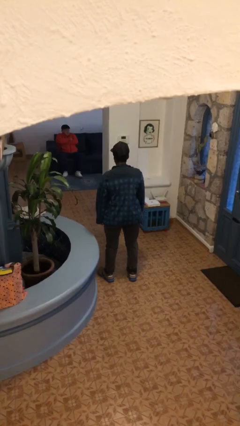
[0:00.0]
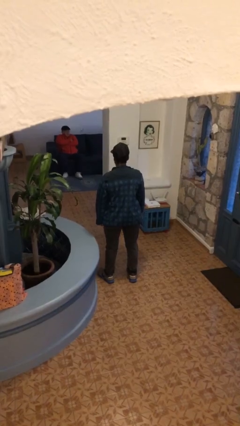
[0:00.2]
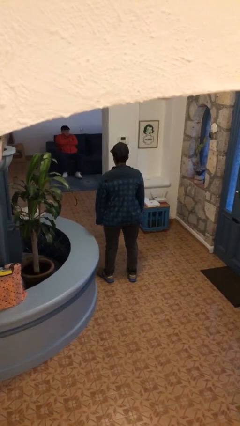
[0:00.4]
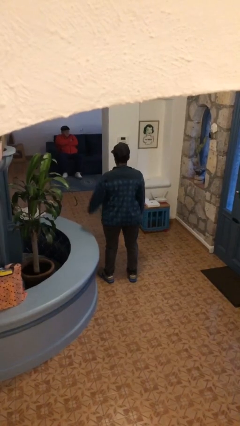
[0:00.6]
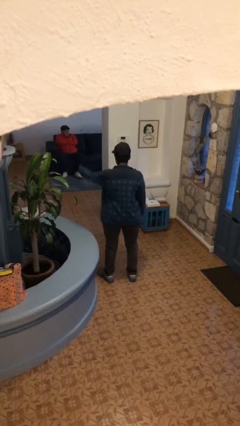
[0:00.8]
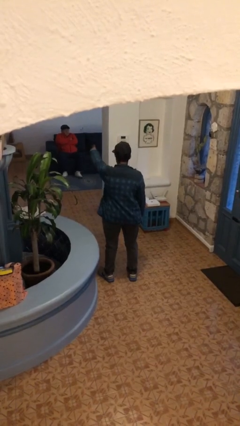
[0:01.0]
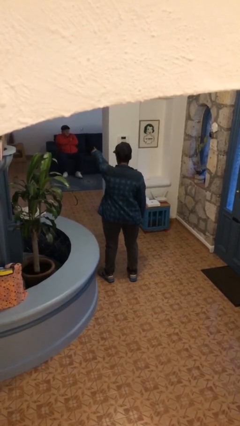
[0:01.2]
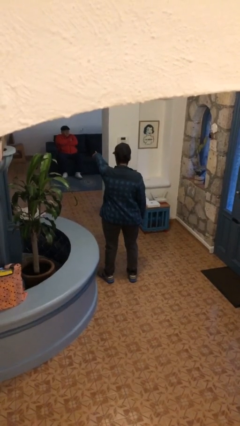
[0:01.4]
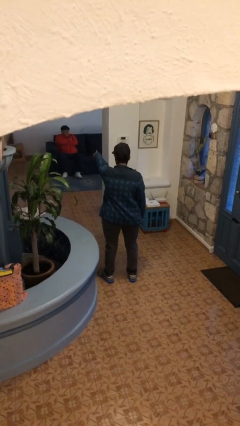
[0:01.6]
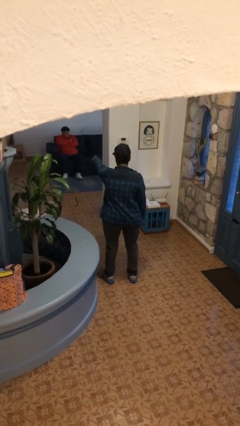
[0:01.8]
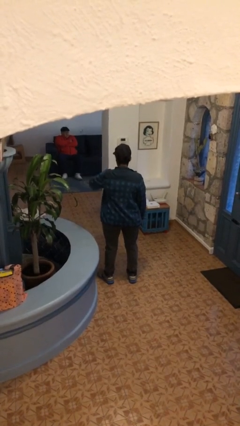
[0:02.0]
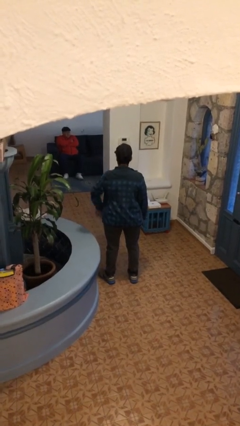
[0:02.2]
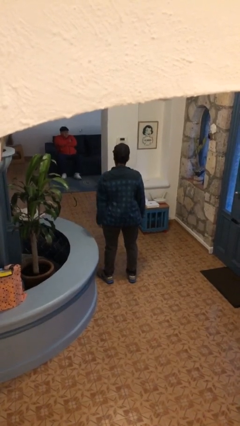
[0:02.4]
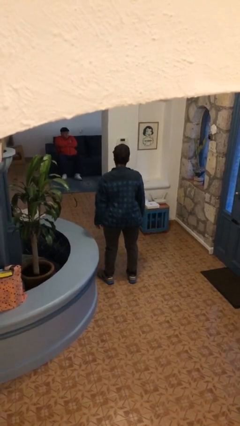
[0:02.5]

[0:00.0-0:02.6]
person points at person

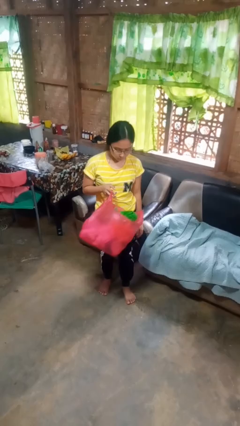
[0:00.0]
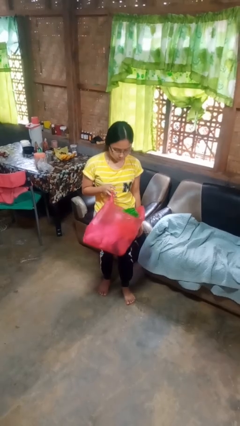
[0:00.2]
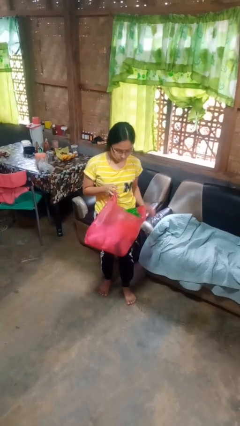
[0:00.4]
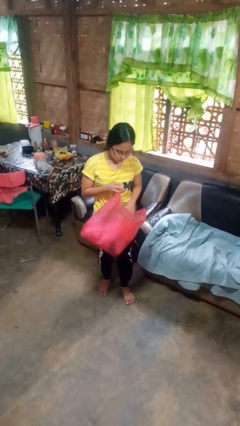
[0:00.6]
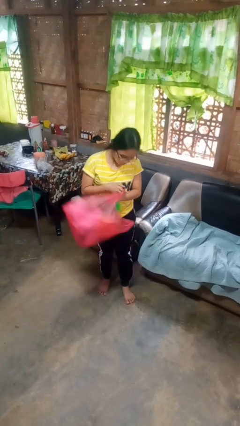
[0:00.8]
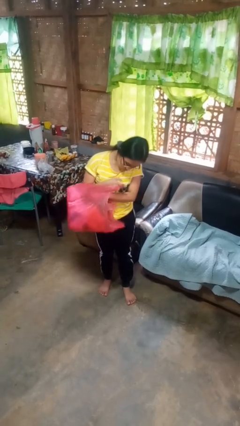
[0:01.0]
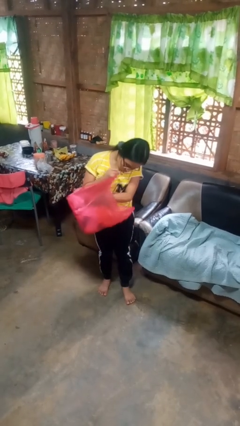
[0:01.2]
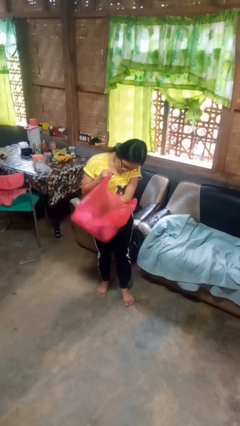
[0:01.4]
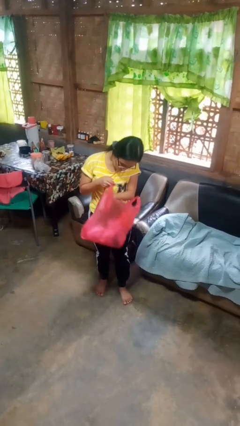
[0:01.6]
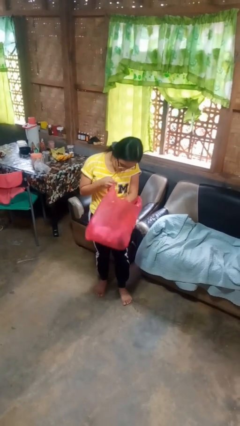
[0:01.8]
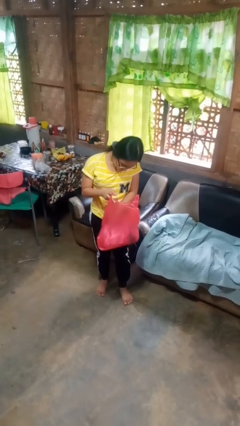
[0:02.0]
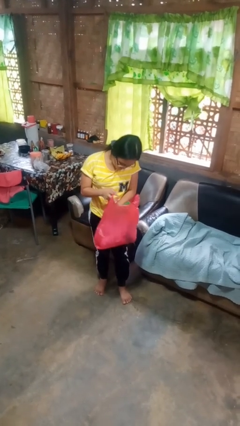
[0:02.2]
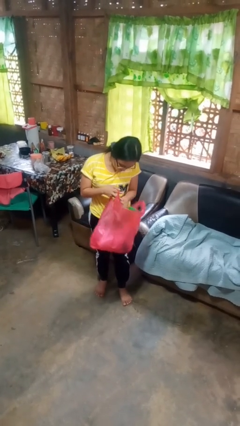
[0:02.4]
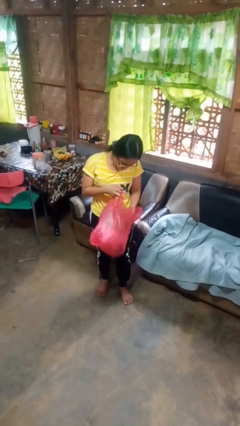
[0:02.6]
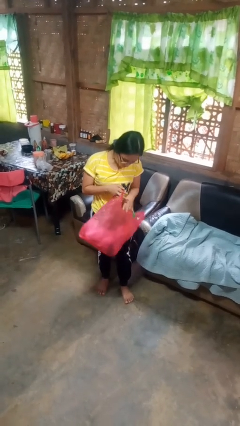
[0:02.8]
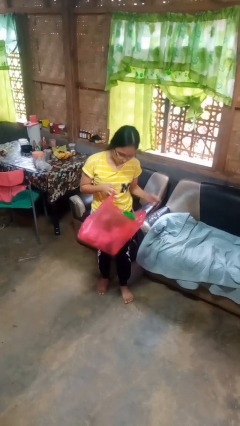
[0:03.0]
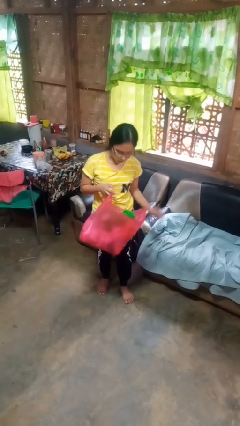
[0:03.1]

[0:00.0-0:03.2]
person searches in bag

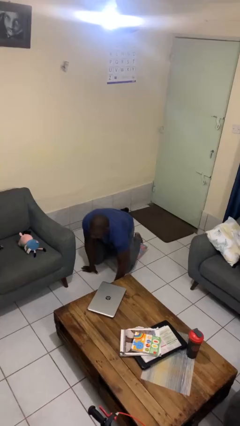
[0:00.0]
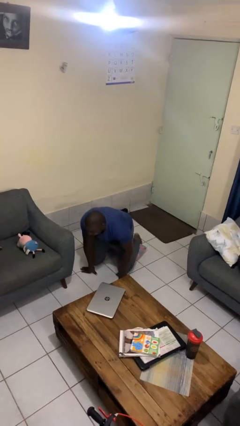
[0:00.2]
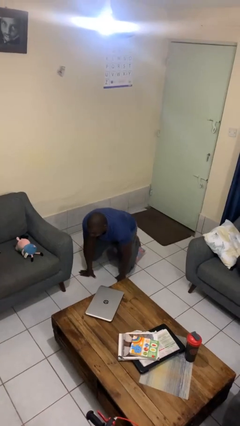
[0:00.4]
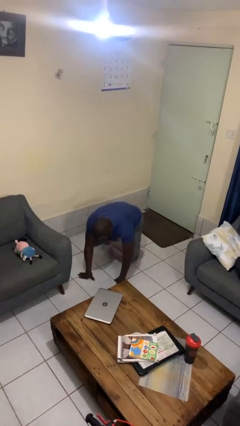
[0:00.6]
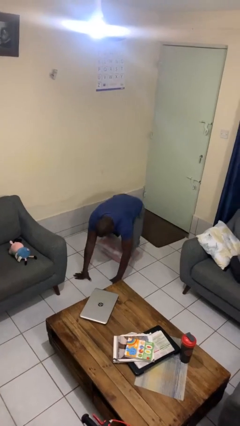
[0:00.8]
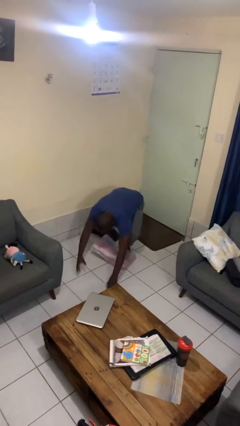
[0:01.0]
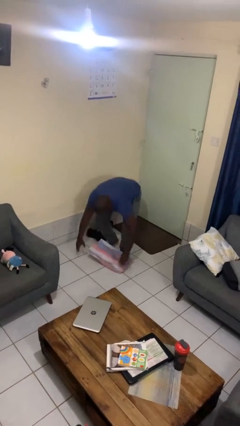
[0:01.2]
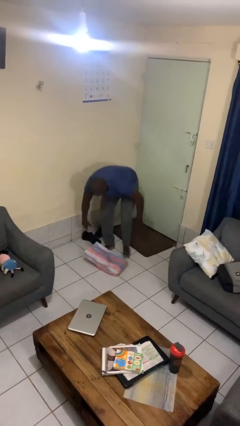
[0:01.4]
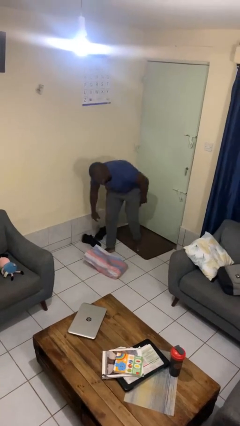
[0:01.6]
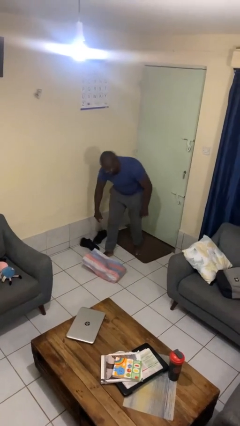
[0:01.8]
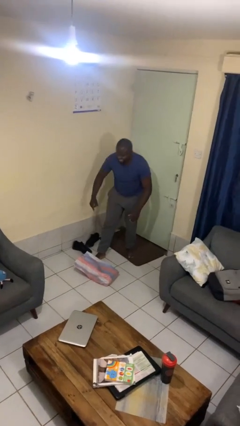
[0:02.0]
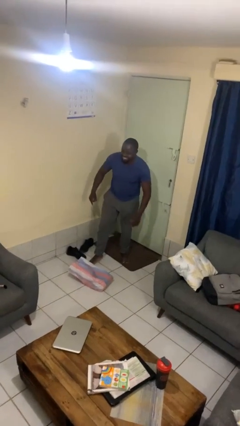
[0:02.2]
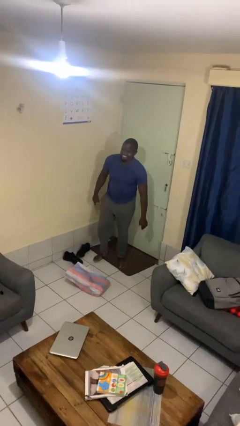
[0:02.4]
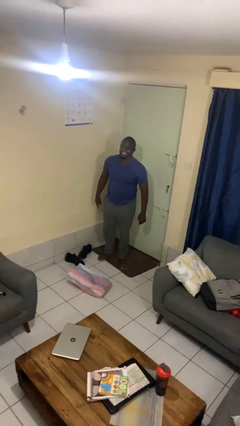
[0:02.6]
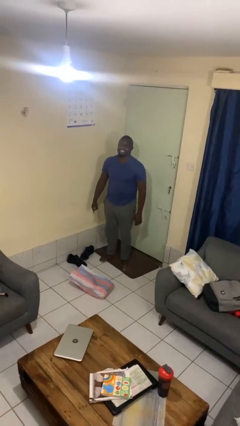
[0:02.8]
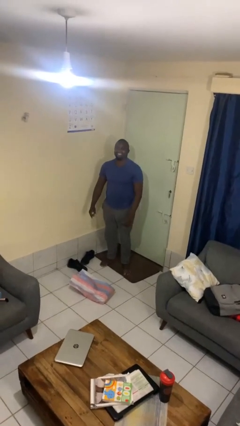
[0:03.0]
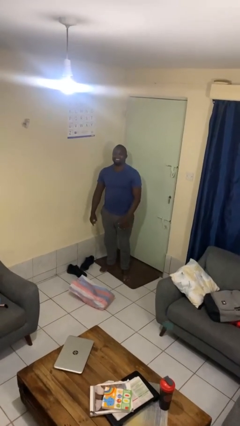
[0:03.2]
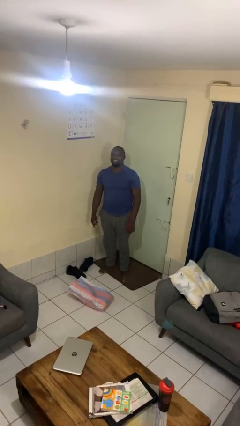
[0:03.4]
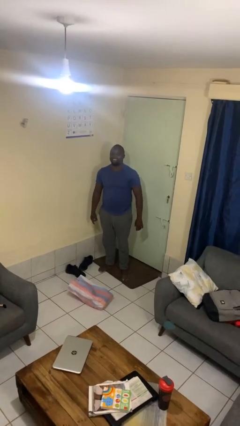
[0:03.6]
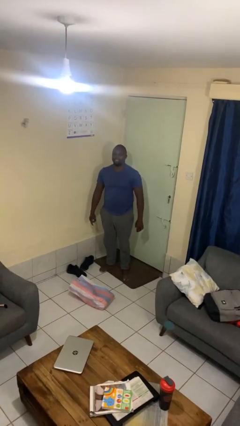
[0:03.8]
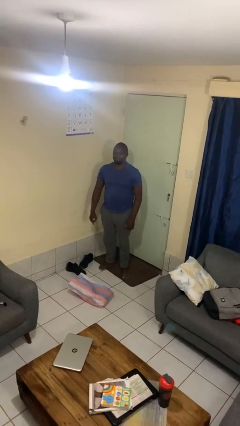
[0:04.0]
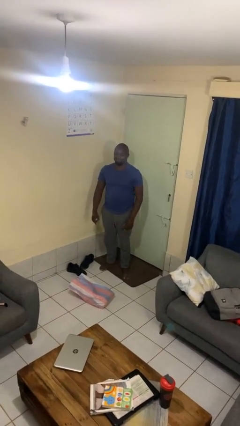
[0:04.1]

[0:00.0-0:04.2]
person stands up from floor

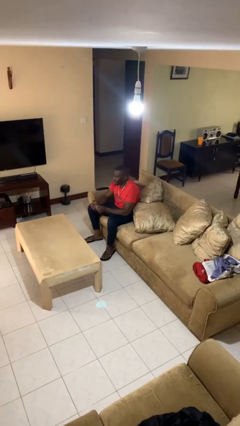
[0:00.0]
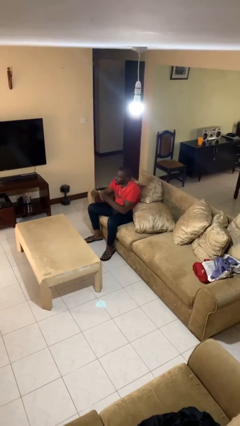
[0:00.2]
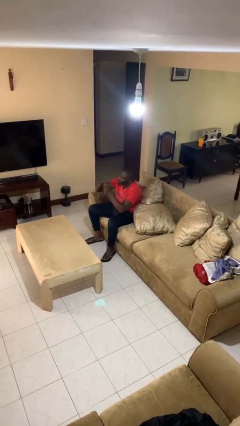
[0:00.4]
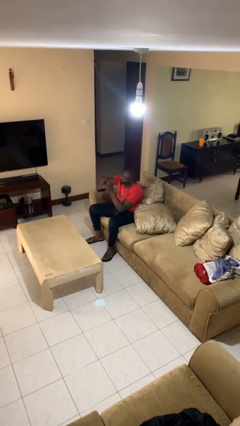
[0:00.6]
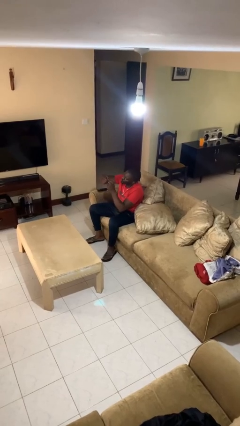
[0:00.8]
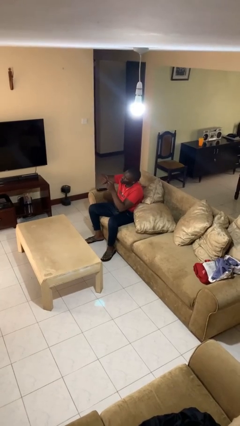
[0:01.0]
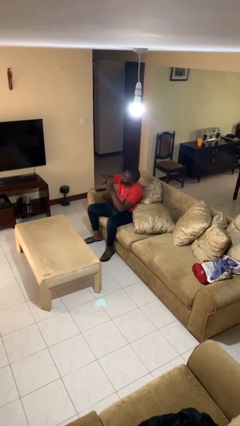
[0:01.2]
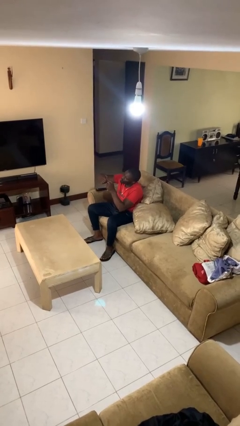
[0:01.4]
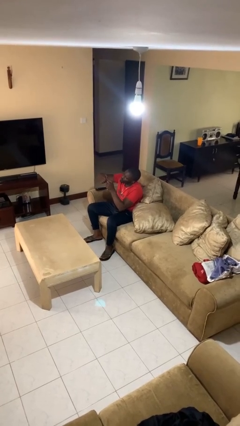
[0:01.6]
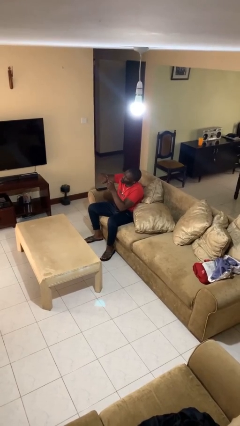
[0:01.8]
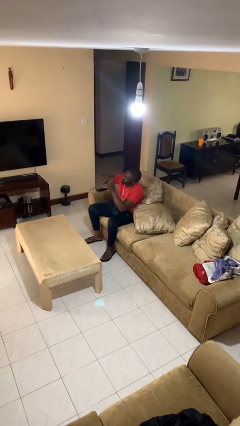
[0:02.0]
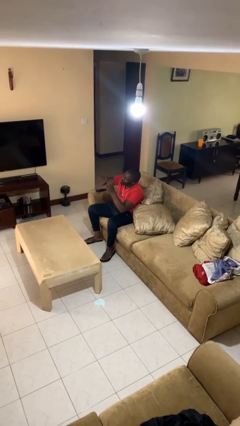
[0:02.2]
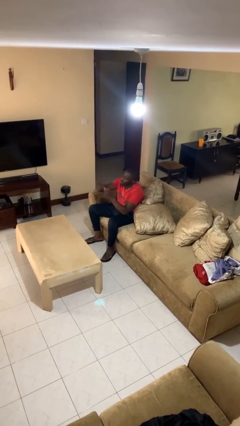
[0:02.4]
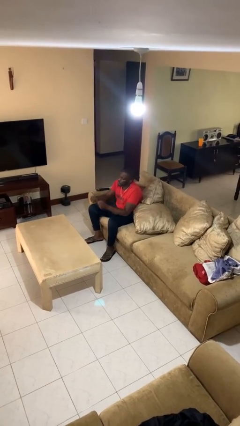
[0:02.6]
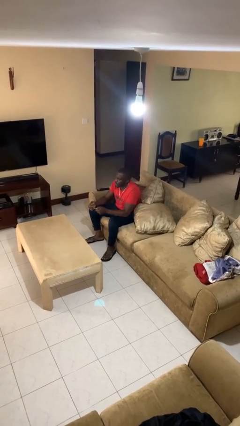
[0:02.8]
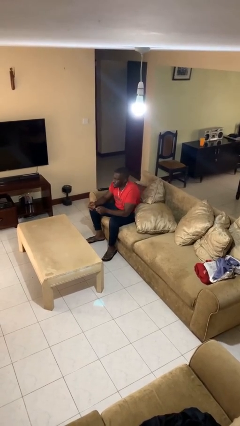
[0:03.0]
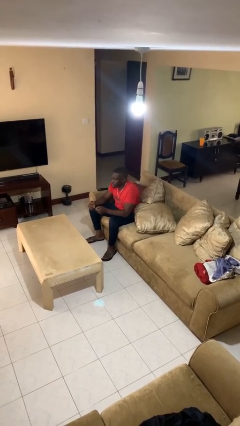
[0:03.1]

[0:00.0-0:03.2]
person clips fingernails

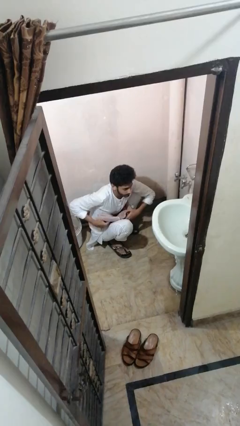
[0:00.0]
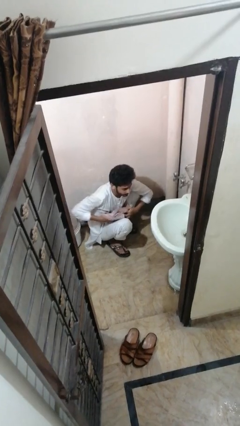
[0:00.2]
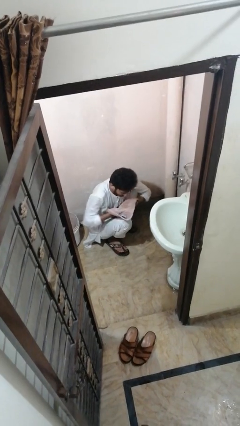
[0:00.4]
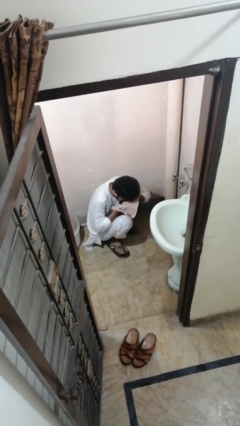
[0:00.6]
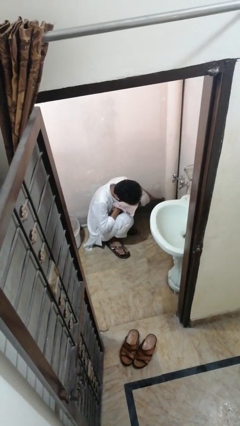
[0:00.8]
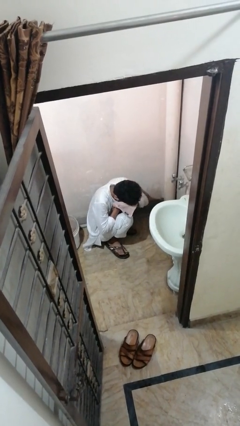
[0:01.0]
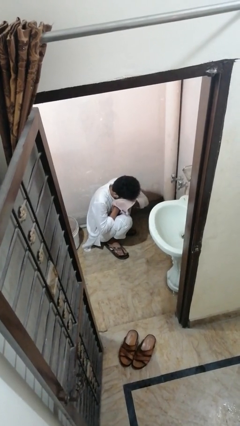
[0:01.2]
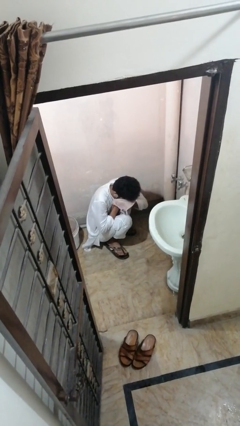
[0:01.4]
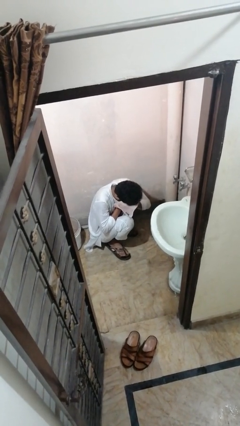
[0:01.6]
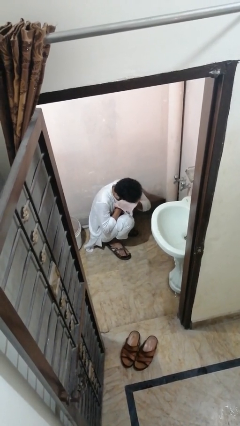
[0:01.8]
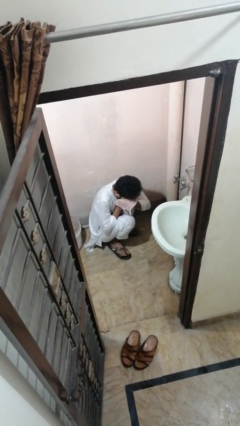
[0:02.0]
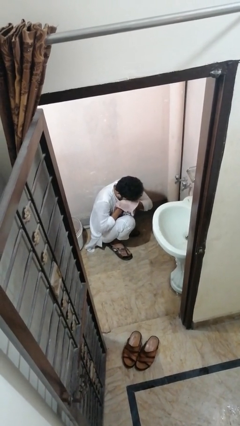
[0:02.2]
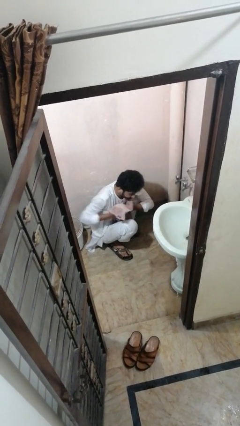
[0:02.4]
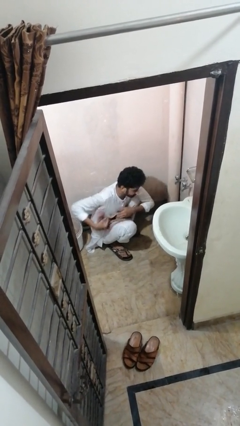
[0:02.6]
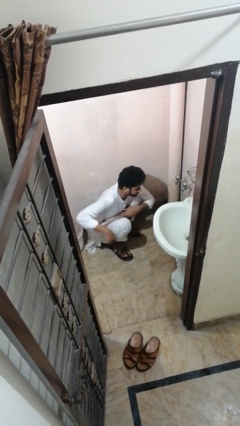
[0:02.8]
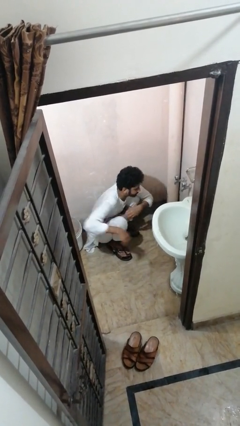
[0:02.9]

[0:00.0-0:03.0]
person dries face with towel

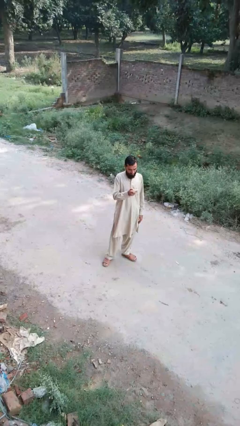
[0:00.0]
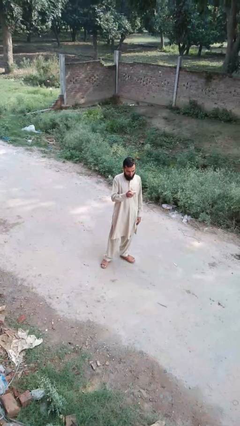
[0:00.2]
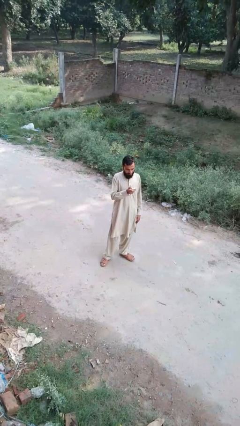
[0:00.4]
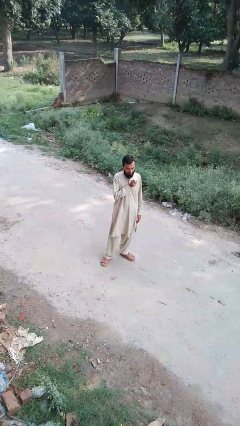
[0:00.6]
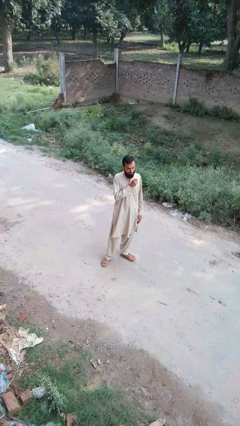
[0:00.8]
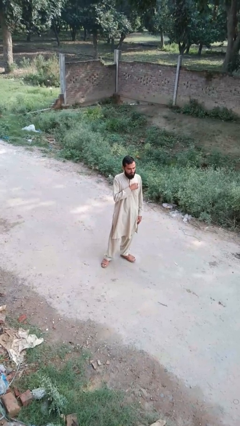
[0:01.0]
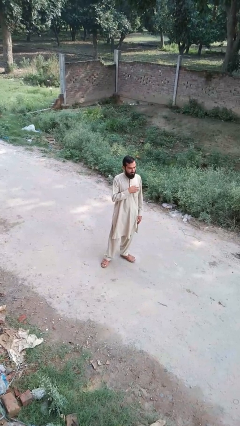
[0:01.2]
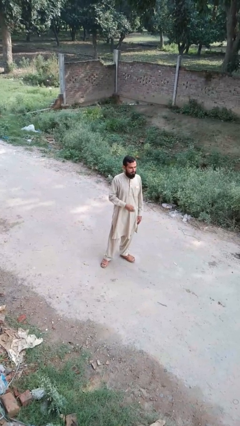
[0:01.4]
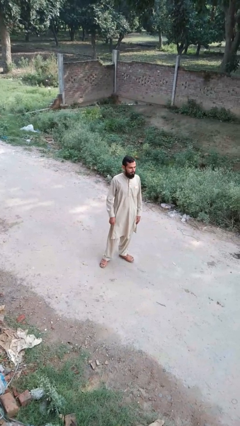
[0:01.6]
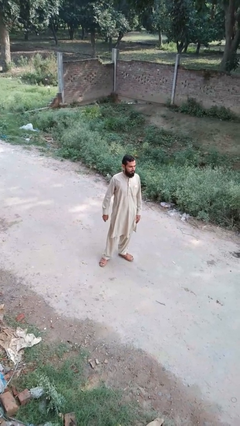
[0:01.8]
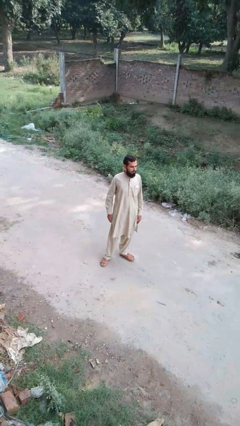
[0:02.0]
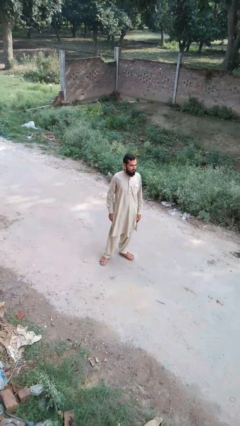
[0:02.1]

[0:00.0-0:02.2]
person puts phone into pocket
